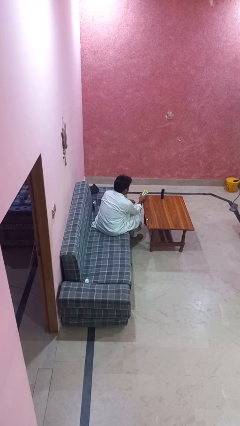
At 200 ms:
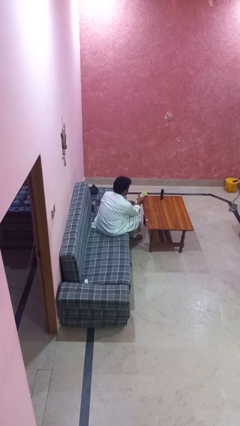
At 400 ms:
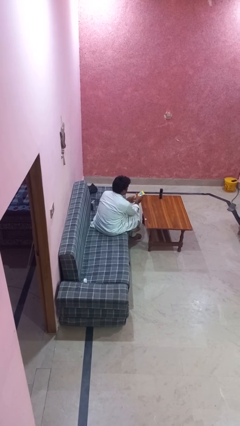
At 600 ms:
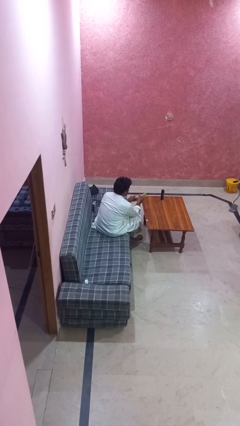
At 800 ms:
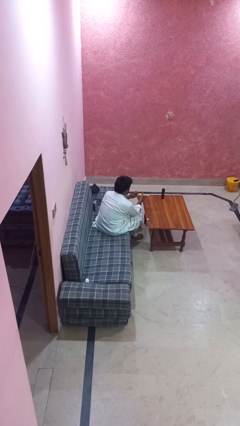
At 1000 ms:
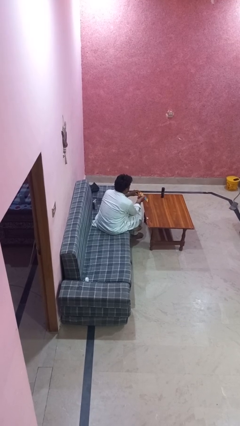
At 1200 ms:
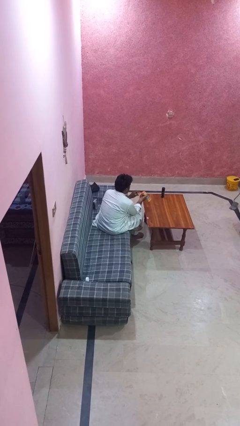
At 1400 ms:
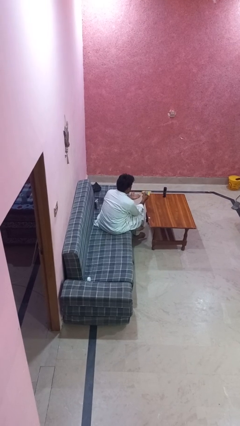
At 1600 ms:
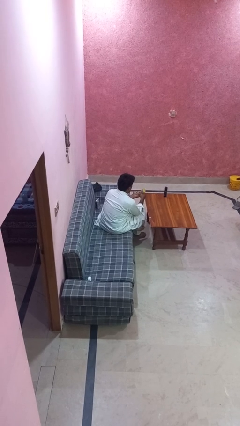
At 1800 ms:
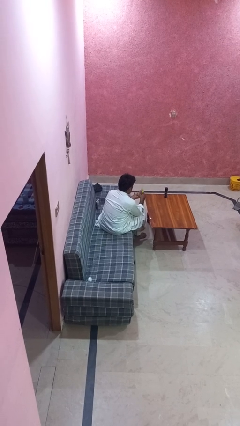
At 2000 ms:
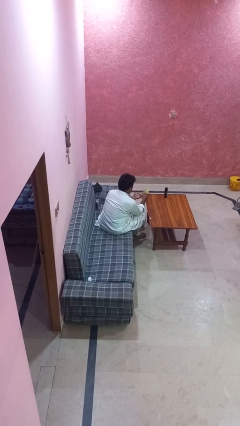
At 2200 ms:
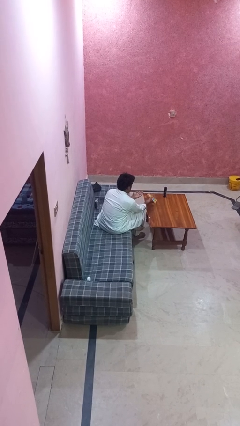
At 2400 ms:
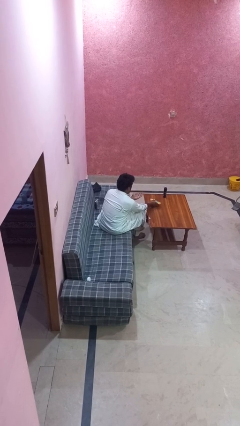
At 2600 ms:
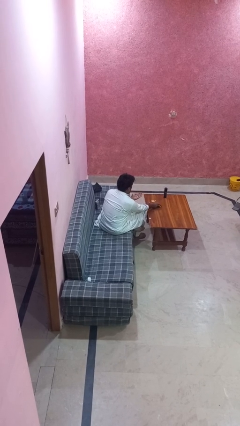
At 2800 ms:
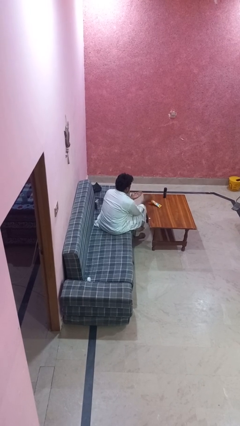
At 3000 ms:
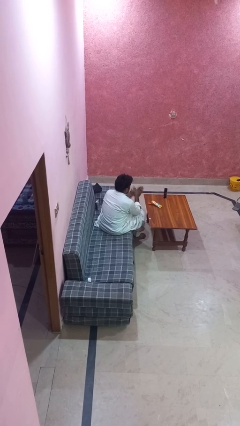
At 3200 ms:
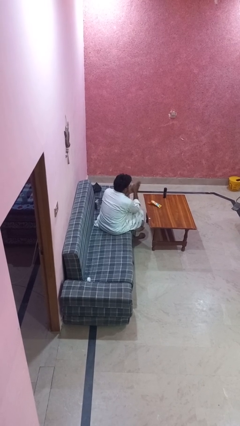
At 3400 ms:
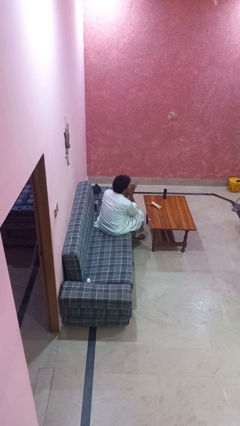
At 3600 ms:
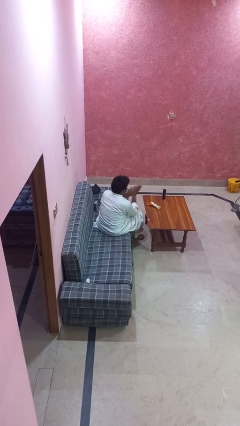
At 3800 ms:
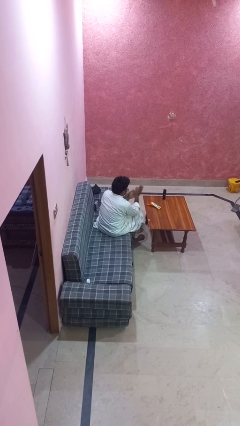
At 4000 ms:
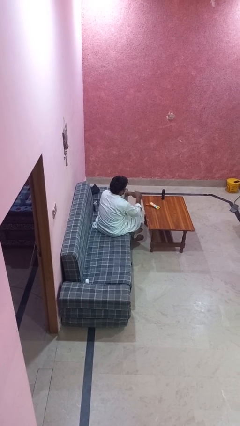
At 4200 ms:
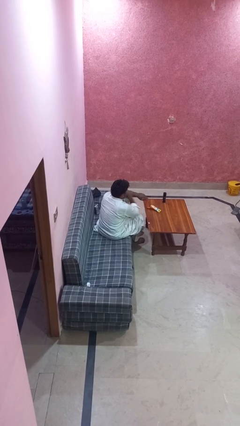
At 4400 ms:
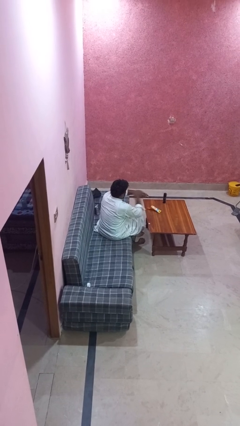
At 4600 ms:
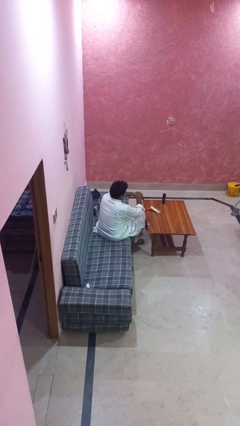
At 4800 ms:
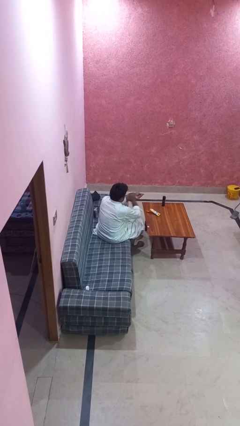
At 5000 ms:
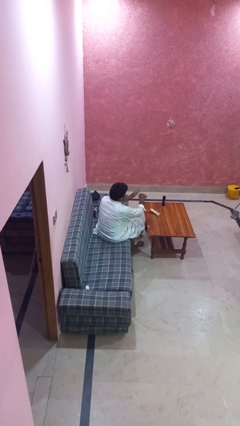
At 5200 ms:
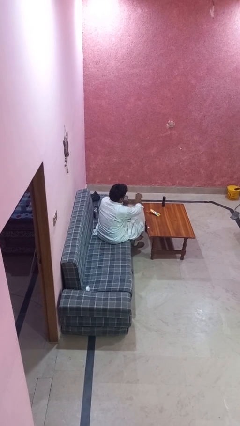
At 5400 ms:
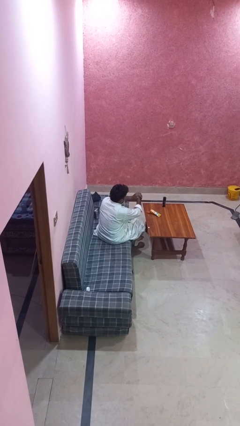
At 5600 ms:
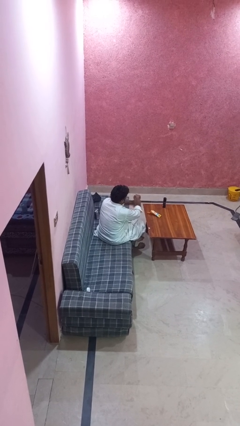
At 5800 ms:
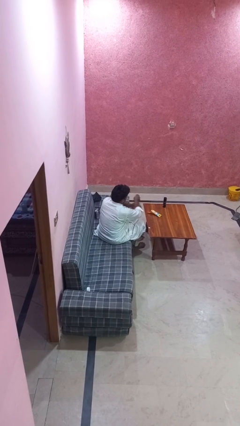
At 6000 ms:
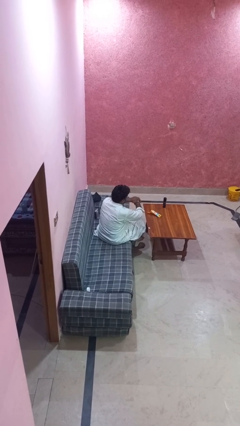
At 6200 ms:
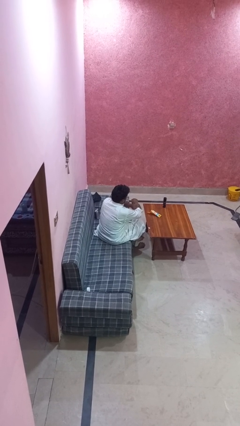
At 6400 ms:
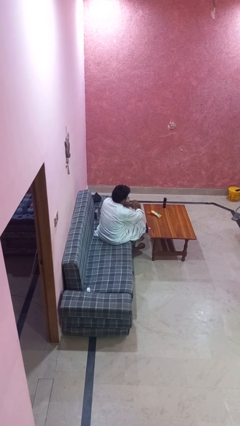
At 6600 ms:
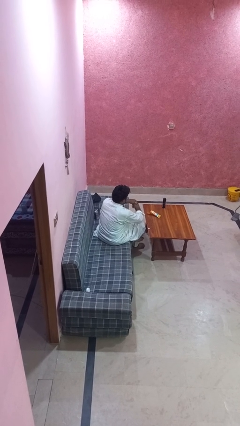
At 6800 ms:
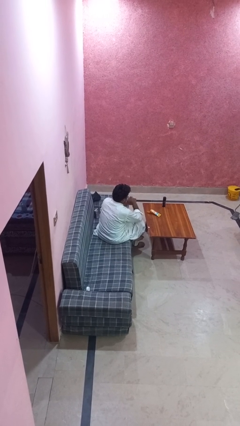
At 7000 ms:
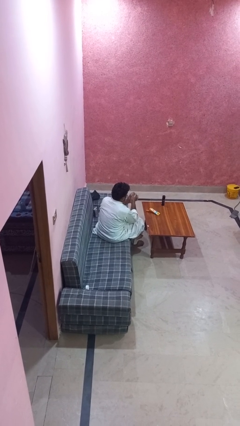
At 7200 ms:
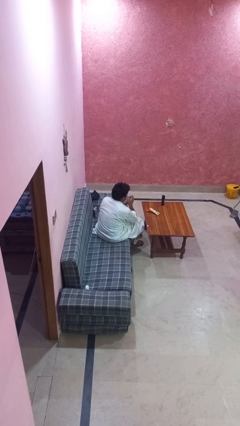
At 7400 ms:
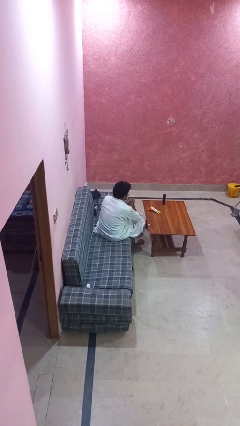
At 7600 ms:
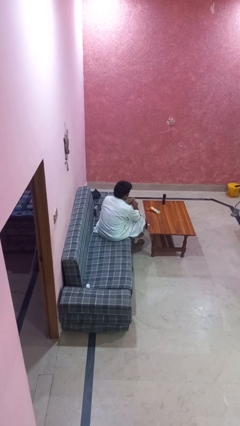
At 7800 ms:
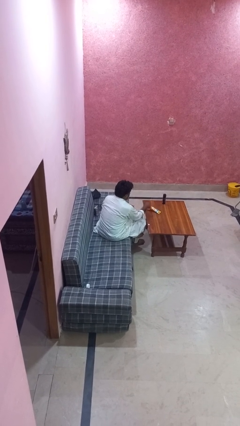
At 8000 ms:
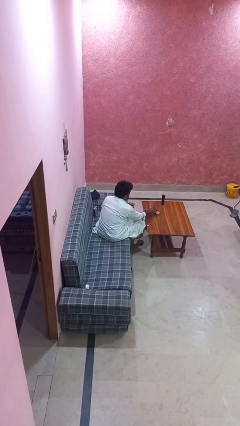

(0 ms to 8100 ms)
person applies sunscreen

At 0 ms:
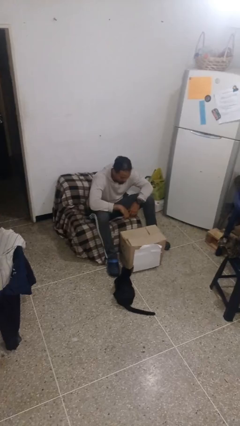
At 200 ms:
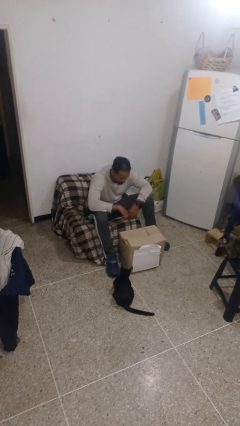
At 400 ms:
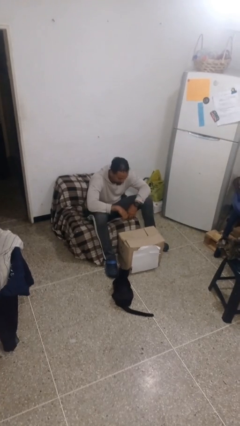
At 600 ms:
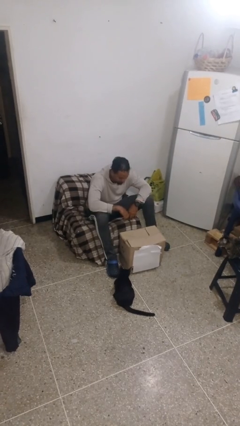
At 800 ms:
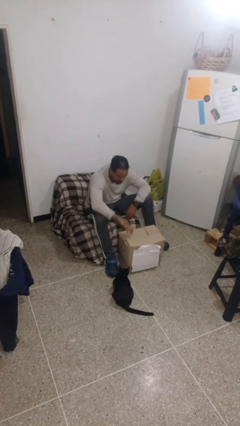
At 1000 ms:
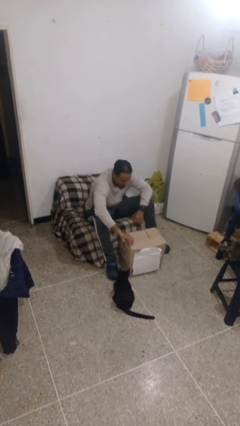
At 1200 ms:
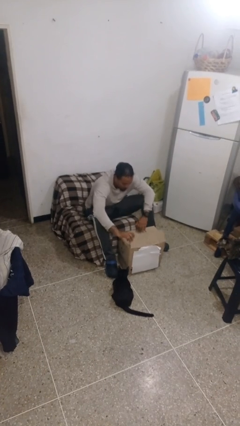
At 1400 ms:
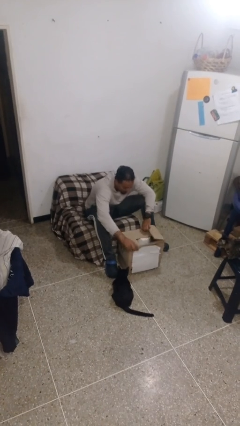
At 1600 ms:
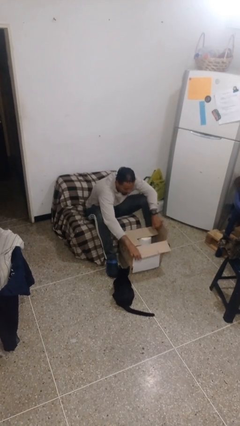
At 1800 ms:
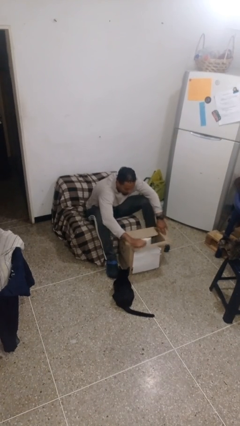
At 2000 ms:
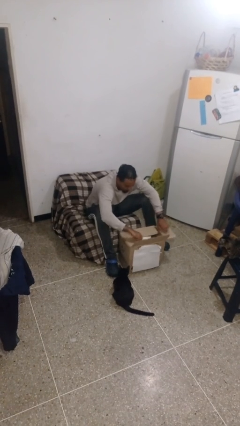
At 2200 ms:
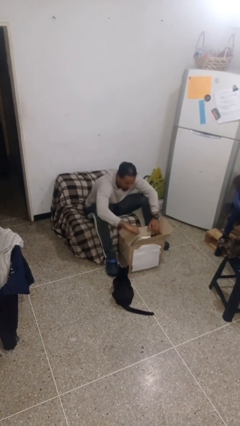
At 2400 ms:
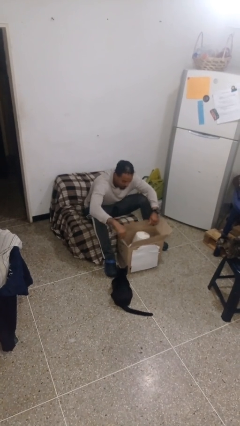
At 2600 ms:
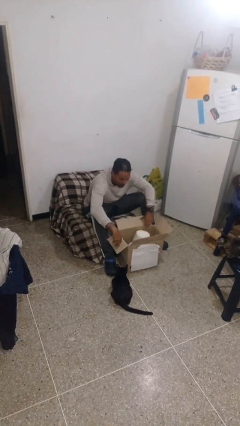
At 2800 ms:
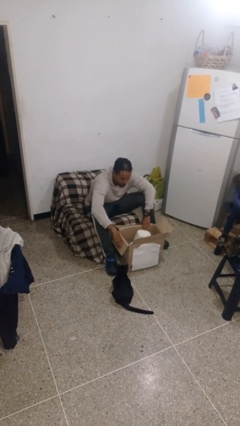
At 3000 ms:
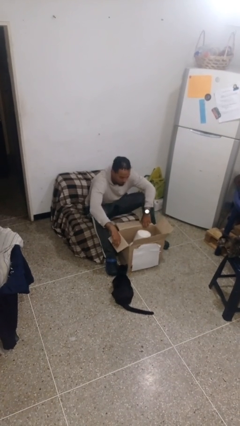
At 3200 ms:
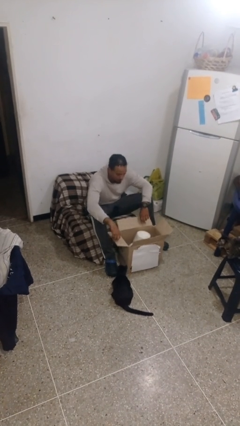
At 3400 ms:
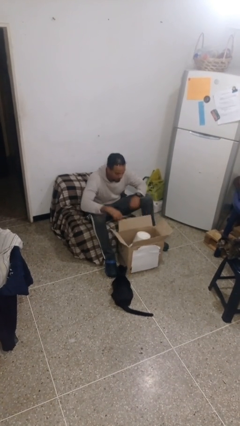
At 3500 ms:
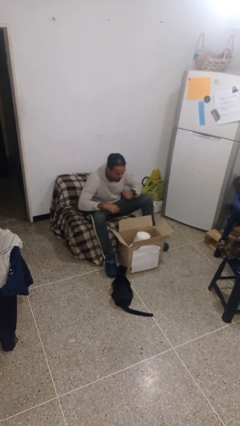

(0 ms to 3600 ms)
person opens box

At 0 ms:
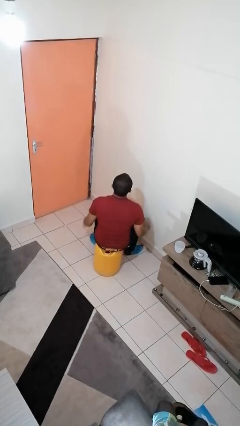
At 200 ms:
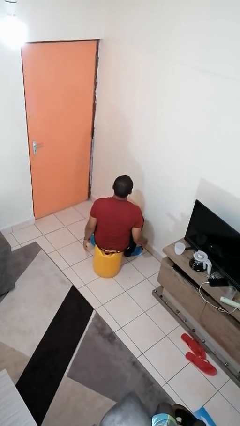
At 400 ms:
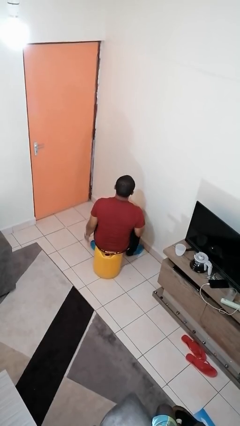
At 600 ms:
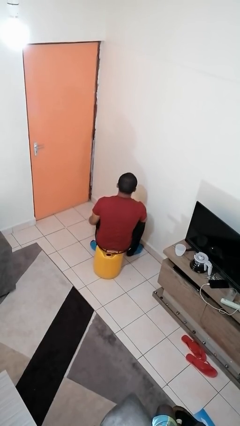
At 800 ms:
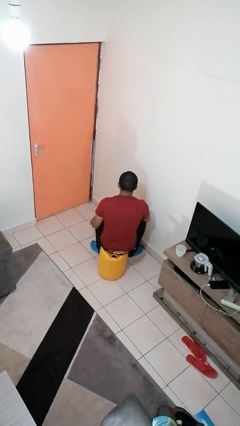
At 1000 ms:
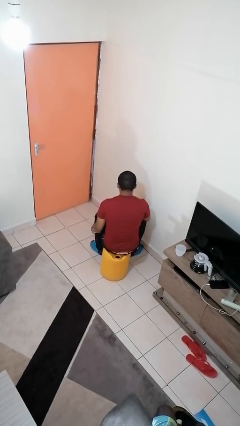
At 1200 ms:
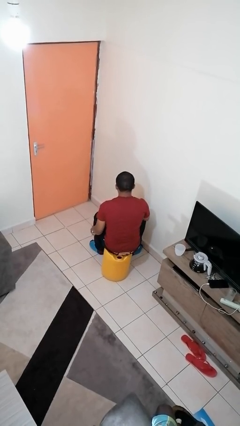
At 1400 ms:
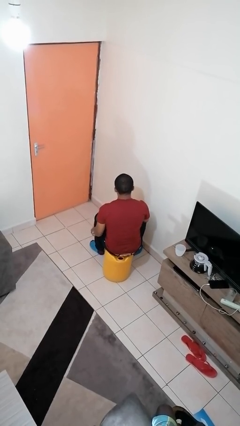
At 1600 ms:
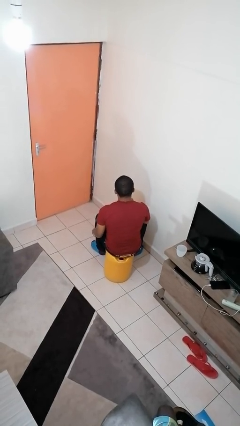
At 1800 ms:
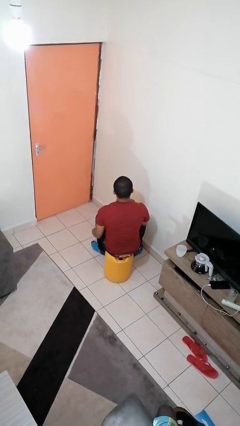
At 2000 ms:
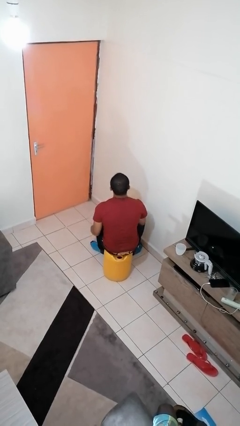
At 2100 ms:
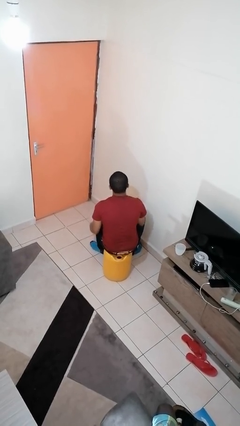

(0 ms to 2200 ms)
person stirs mug

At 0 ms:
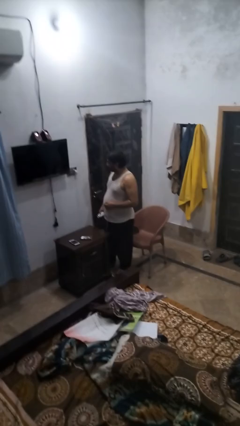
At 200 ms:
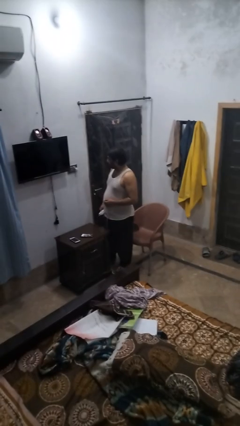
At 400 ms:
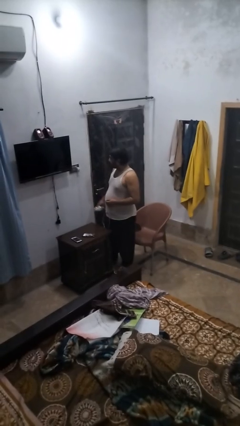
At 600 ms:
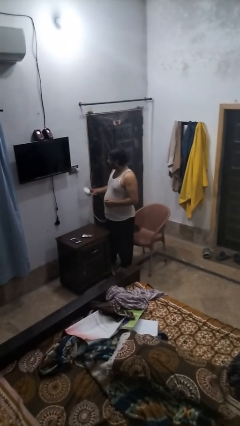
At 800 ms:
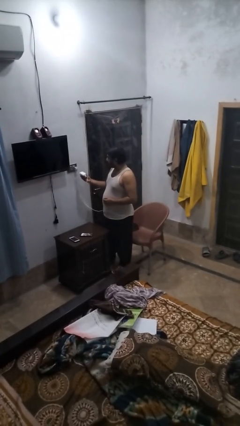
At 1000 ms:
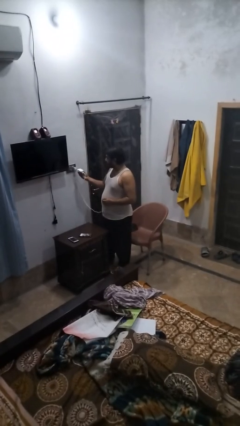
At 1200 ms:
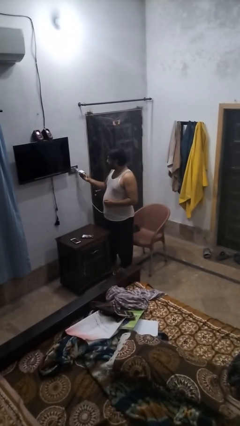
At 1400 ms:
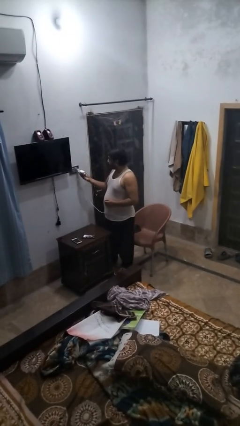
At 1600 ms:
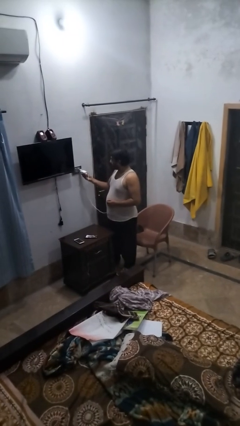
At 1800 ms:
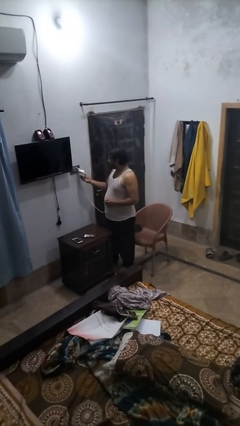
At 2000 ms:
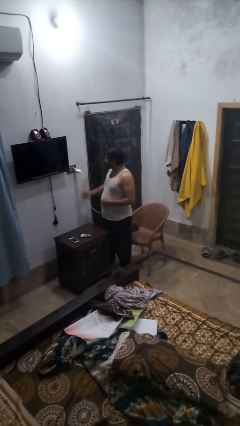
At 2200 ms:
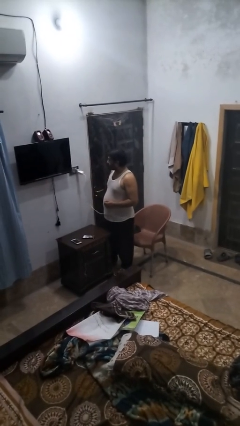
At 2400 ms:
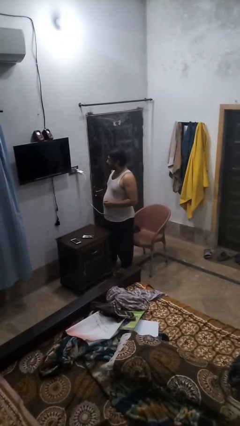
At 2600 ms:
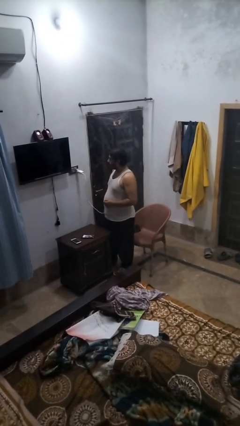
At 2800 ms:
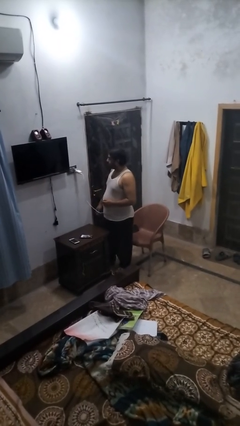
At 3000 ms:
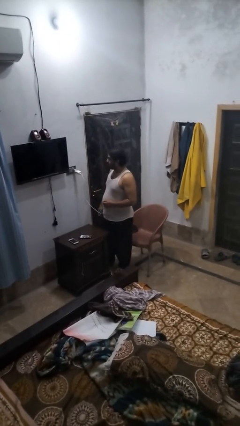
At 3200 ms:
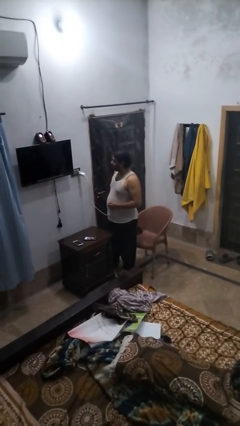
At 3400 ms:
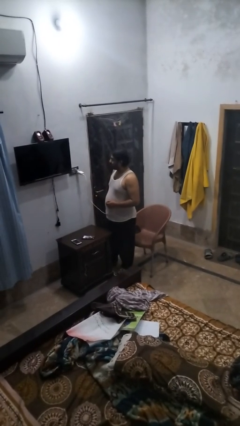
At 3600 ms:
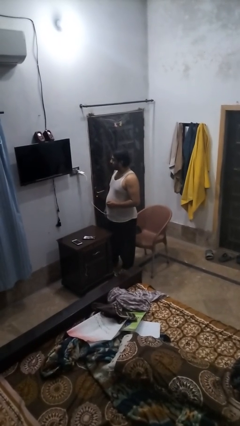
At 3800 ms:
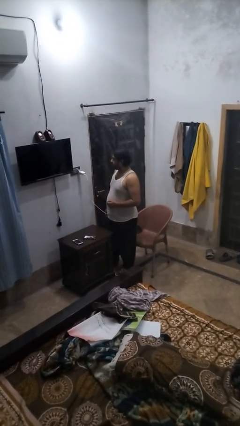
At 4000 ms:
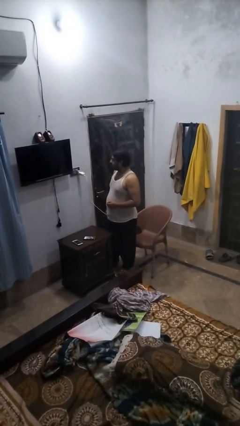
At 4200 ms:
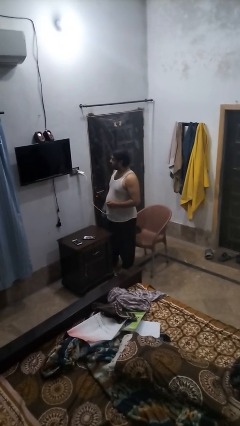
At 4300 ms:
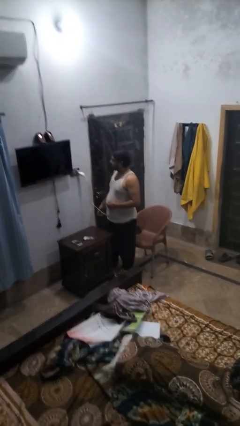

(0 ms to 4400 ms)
person plugs into electrical socket
